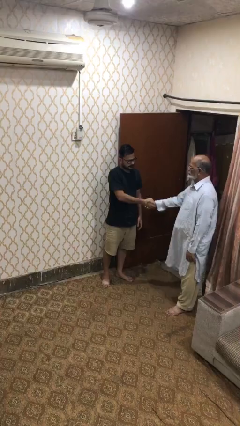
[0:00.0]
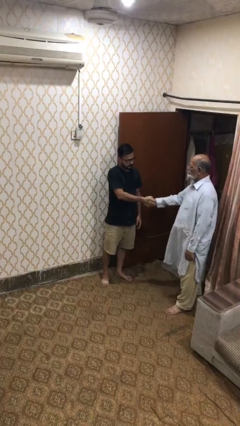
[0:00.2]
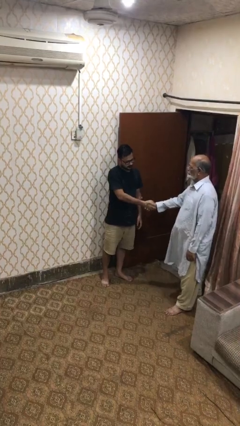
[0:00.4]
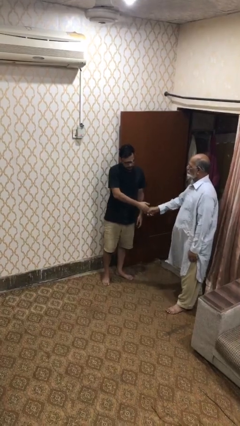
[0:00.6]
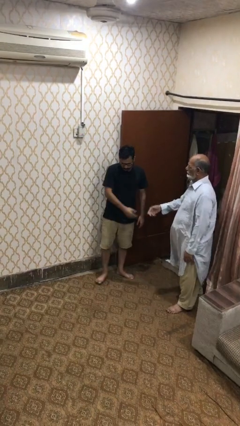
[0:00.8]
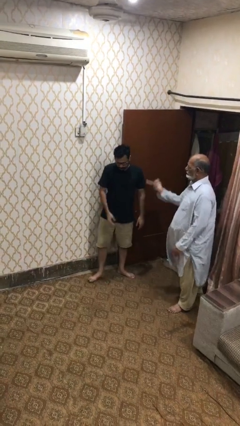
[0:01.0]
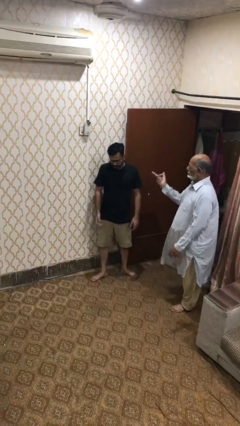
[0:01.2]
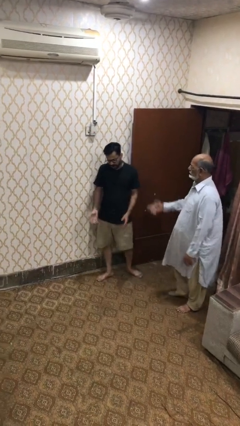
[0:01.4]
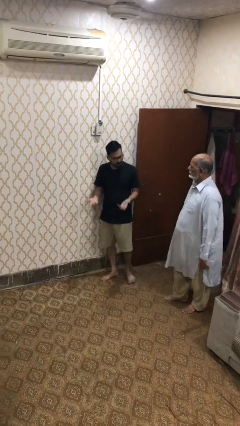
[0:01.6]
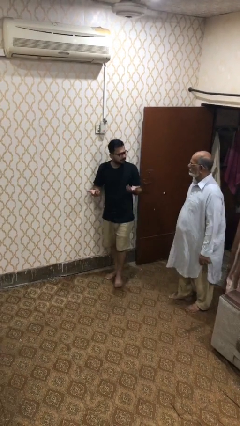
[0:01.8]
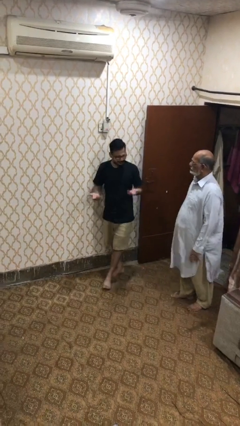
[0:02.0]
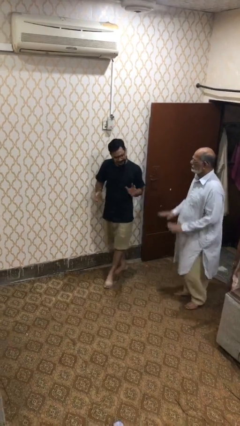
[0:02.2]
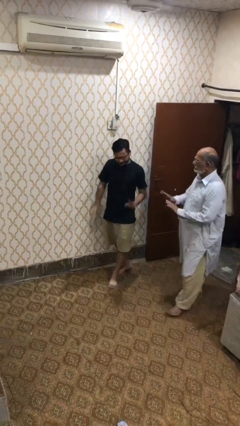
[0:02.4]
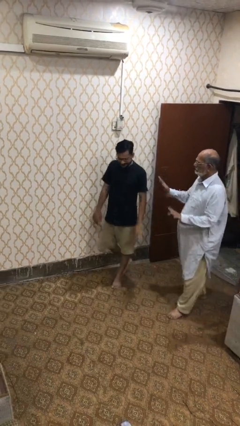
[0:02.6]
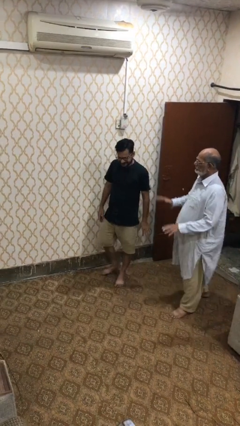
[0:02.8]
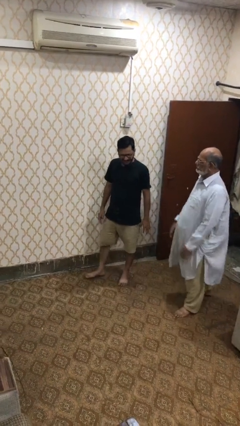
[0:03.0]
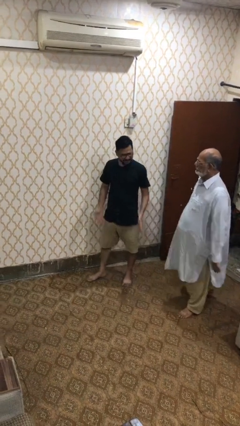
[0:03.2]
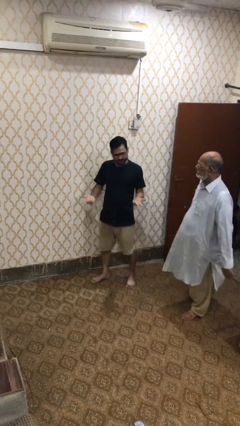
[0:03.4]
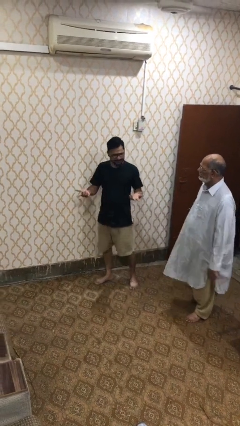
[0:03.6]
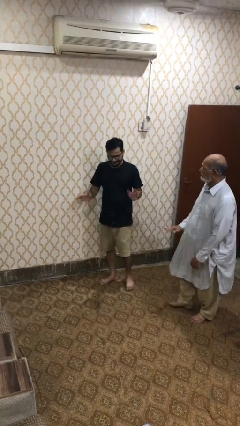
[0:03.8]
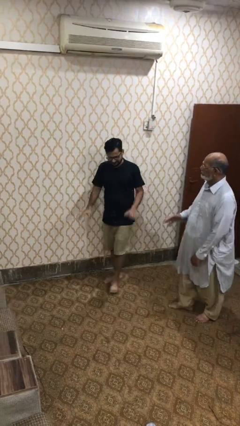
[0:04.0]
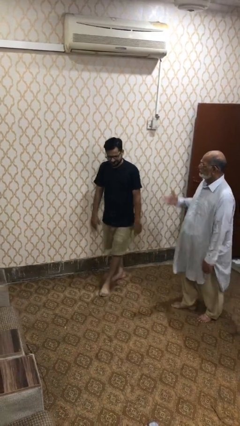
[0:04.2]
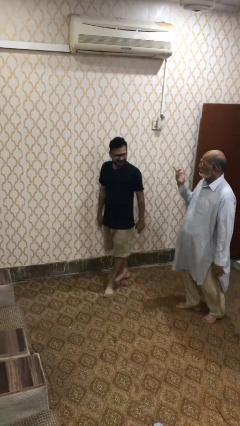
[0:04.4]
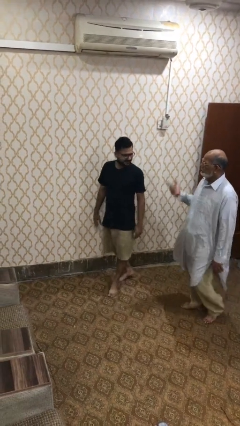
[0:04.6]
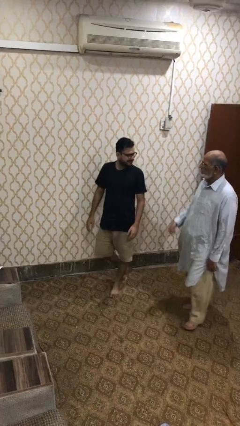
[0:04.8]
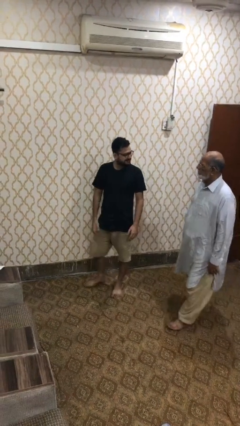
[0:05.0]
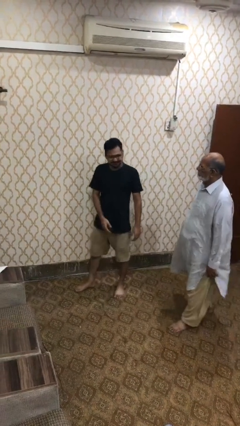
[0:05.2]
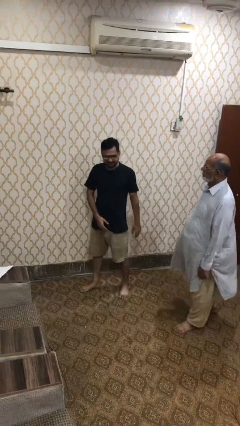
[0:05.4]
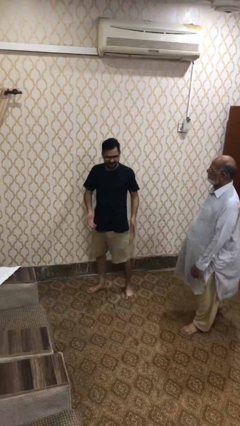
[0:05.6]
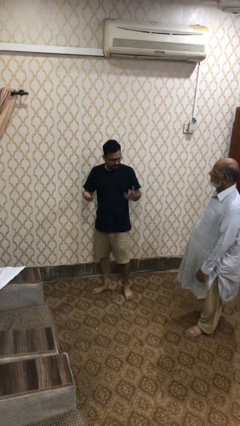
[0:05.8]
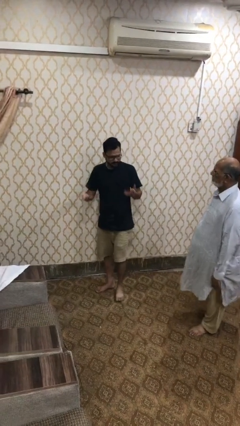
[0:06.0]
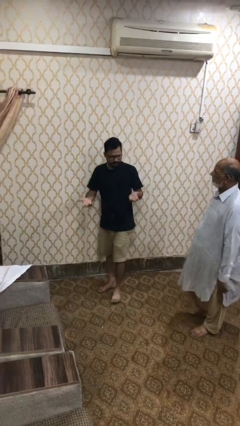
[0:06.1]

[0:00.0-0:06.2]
person talks to person

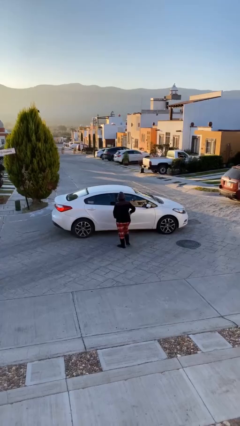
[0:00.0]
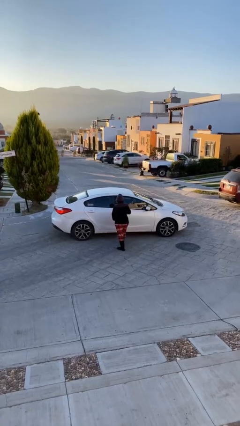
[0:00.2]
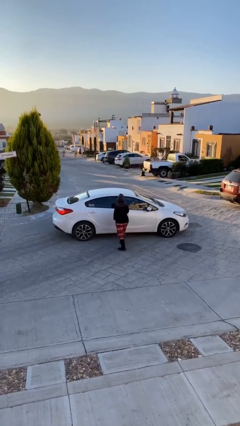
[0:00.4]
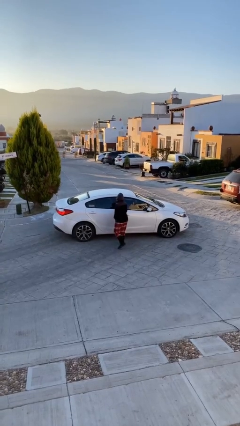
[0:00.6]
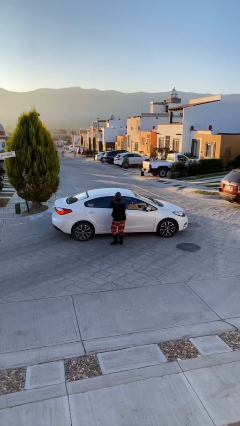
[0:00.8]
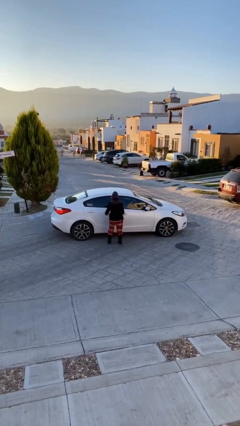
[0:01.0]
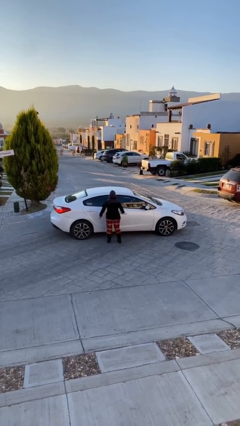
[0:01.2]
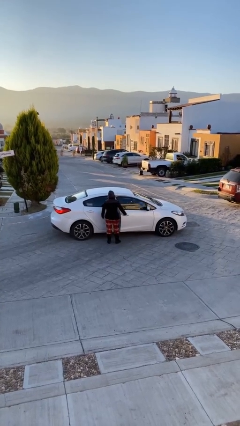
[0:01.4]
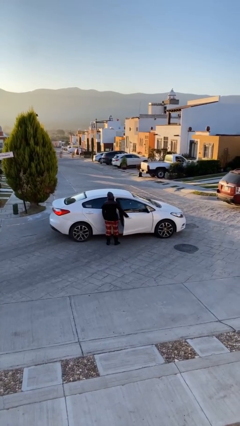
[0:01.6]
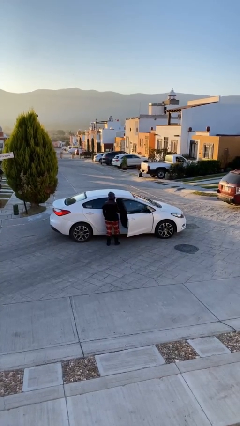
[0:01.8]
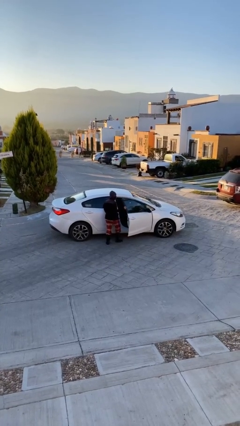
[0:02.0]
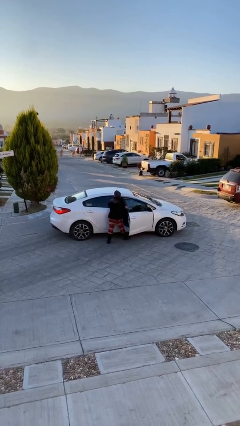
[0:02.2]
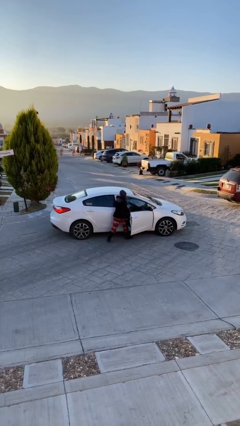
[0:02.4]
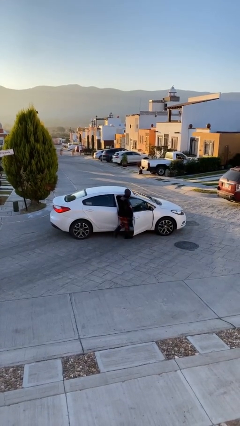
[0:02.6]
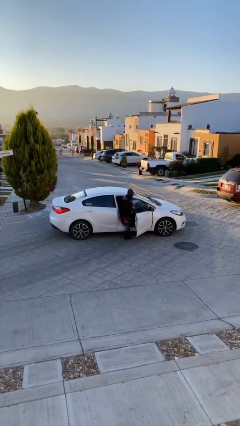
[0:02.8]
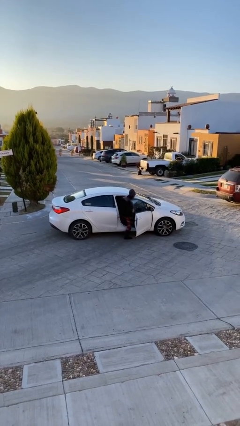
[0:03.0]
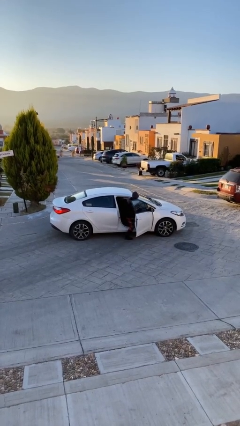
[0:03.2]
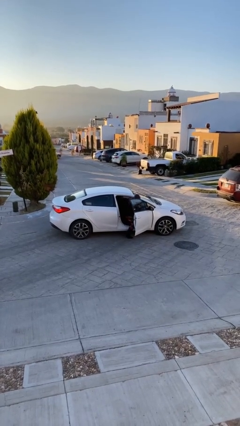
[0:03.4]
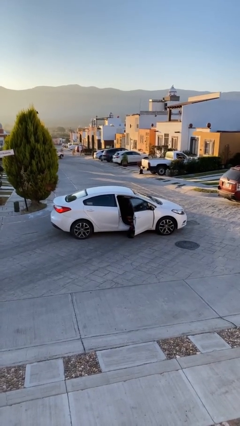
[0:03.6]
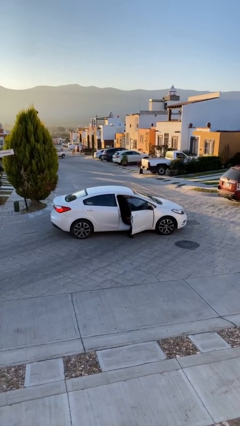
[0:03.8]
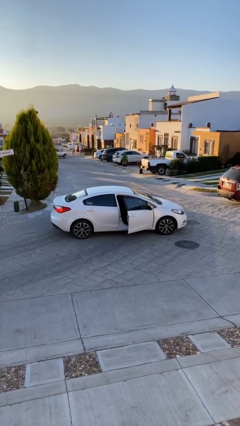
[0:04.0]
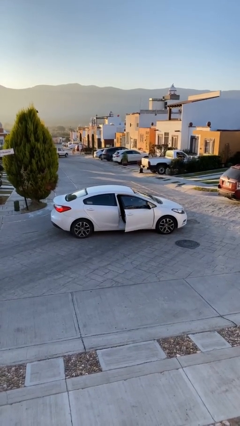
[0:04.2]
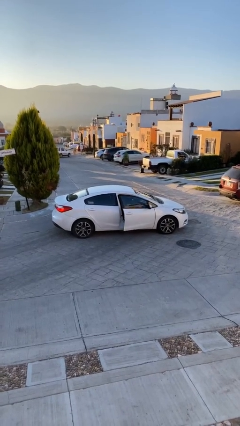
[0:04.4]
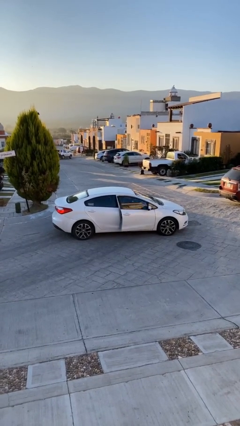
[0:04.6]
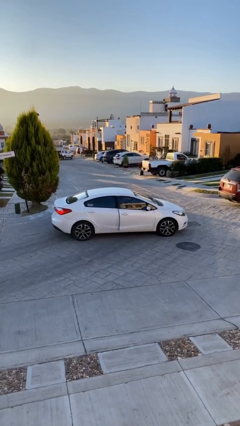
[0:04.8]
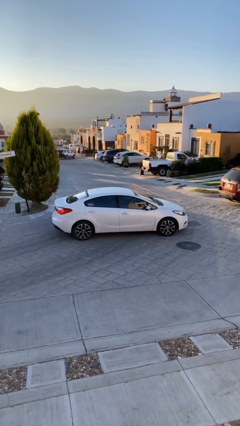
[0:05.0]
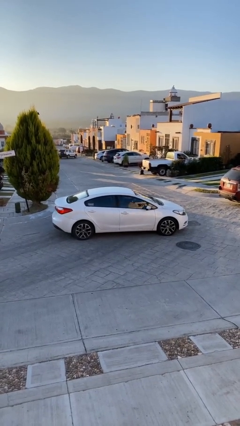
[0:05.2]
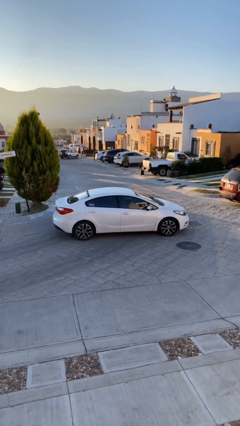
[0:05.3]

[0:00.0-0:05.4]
car picks up person

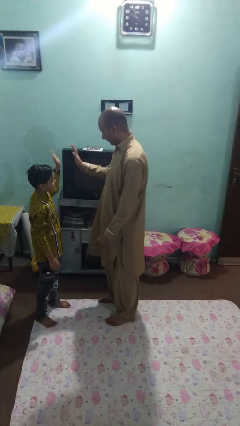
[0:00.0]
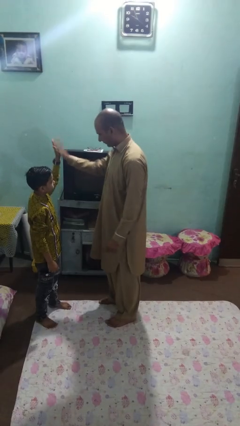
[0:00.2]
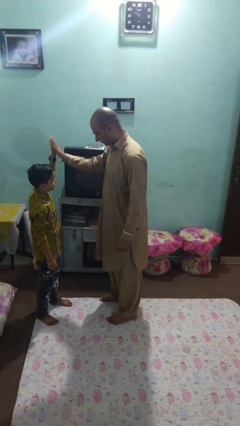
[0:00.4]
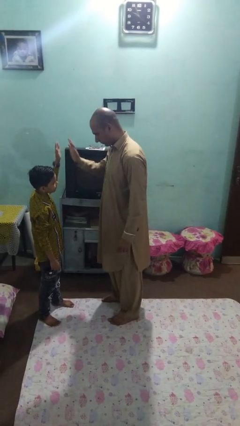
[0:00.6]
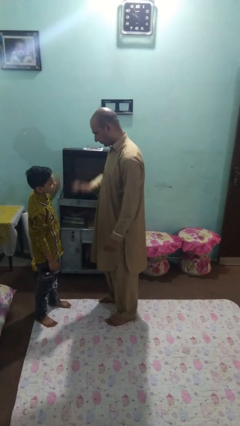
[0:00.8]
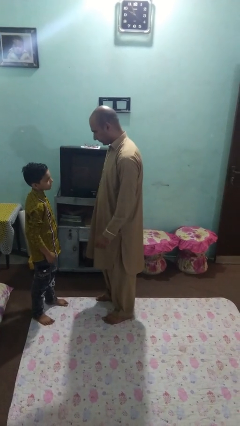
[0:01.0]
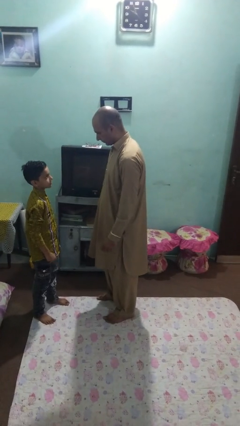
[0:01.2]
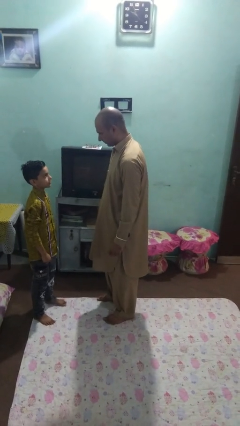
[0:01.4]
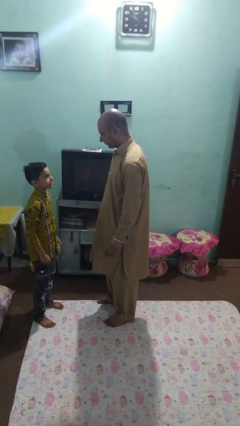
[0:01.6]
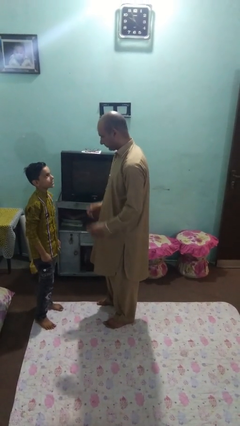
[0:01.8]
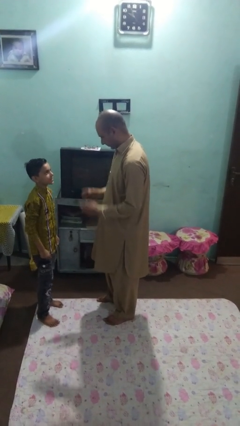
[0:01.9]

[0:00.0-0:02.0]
person highfives hand

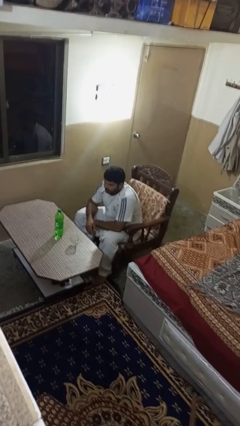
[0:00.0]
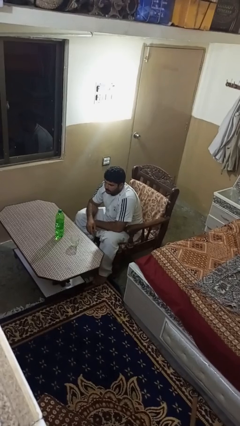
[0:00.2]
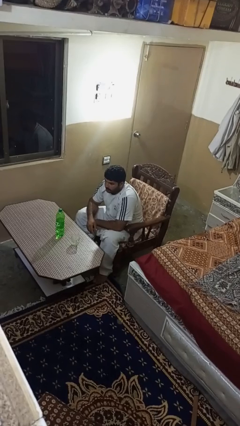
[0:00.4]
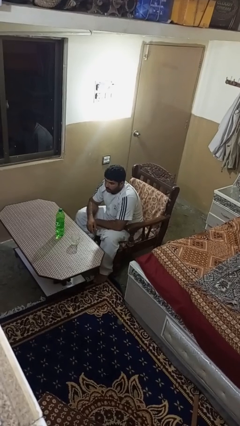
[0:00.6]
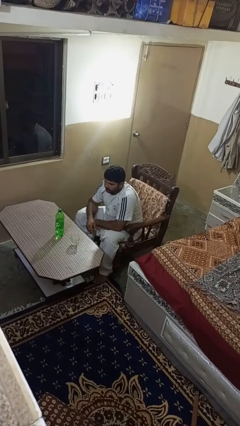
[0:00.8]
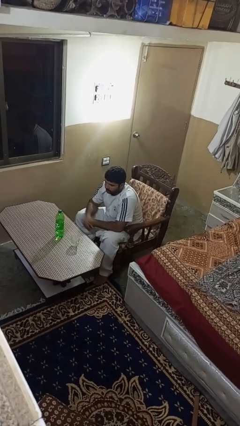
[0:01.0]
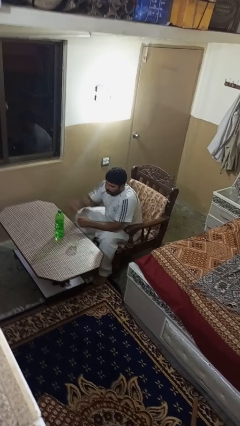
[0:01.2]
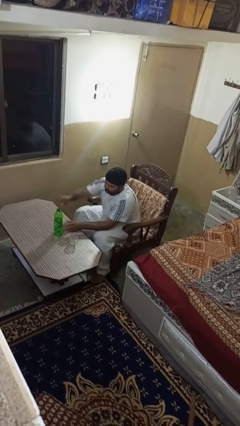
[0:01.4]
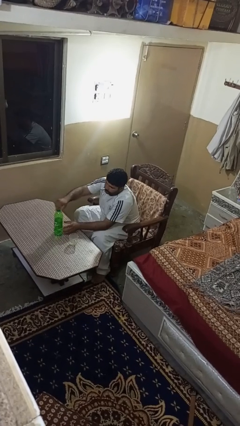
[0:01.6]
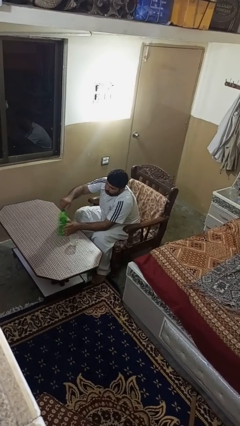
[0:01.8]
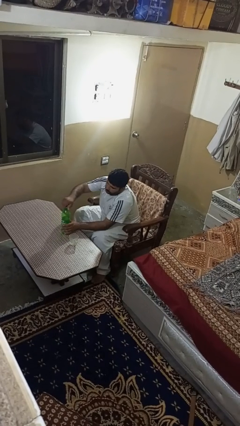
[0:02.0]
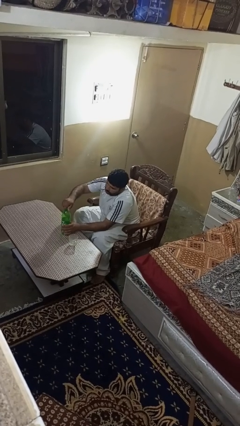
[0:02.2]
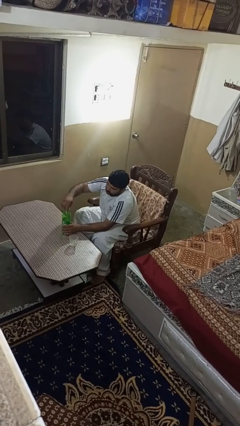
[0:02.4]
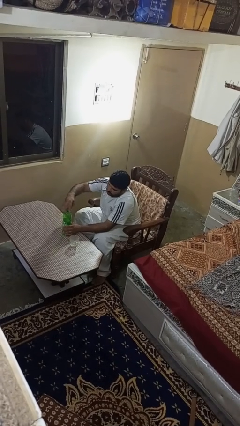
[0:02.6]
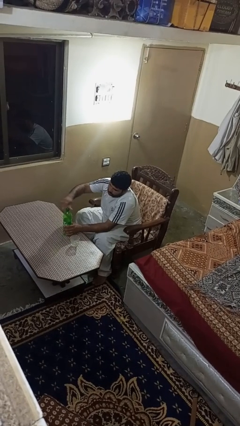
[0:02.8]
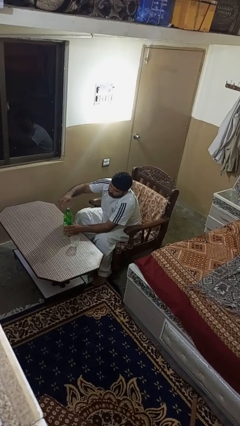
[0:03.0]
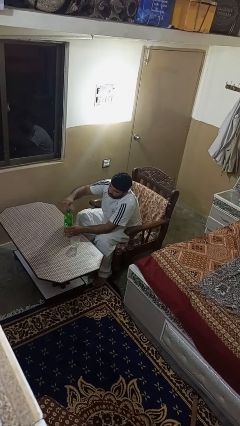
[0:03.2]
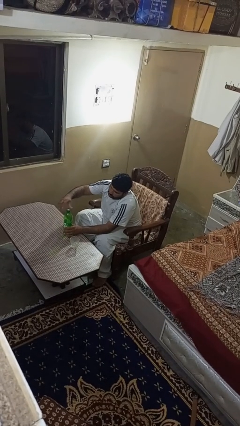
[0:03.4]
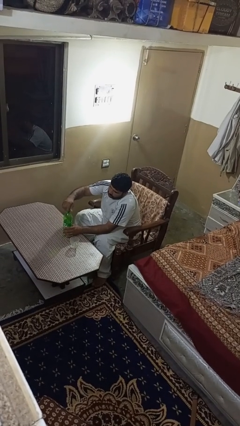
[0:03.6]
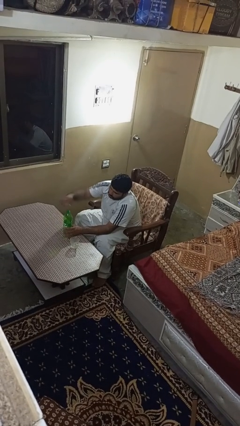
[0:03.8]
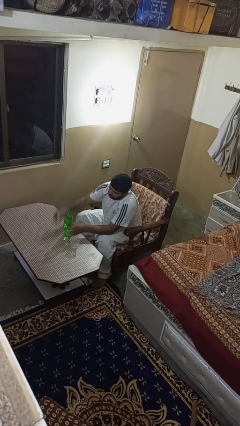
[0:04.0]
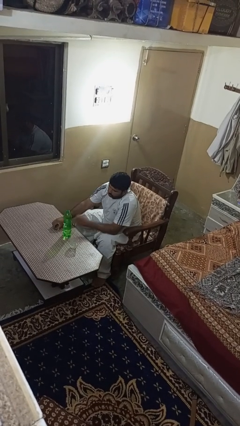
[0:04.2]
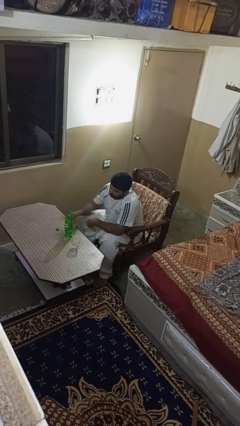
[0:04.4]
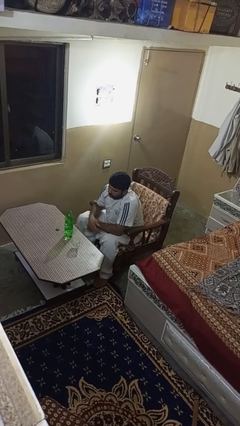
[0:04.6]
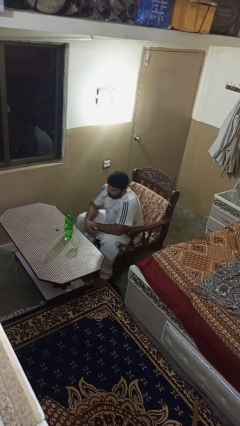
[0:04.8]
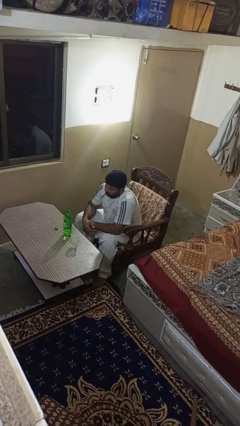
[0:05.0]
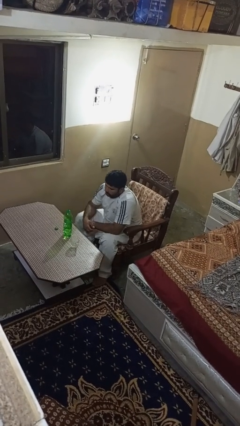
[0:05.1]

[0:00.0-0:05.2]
person unscrews lid from bottle
